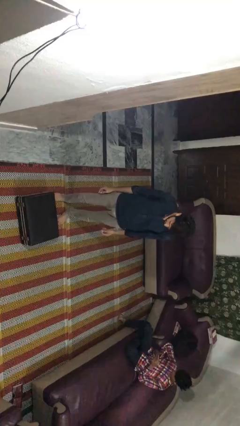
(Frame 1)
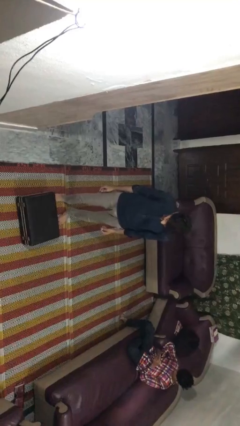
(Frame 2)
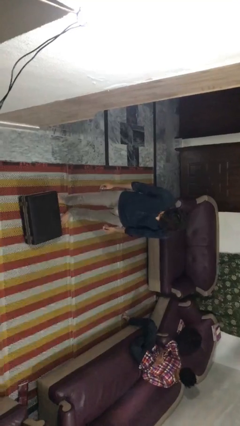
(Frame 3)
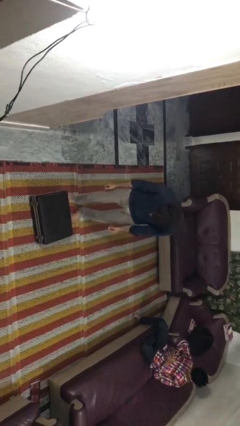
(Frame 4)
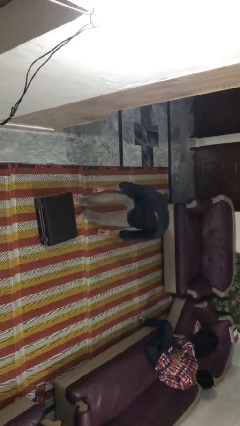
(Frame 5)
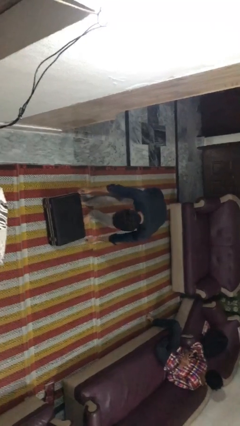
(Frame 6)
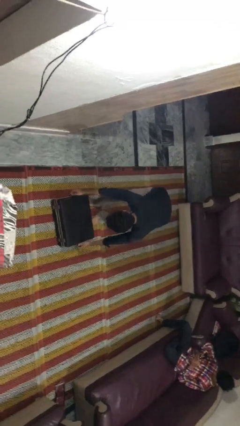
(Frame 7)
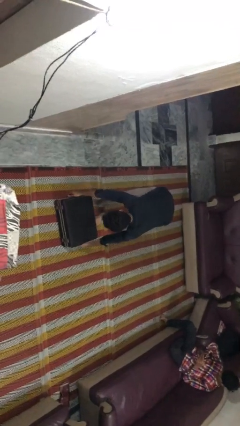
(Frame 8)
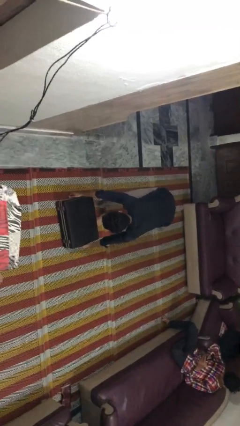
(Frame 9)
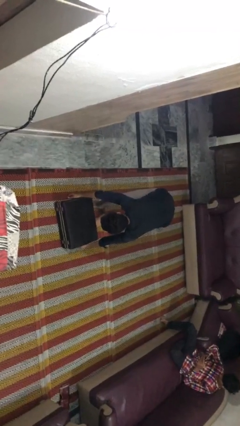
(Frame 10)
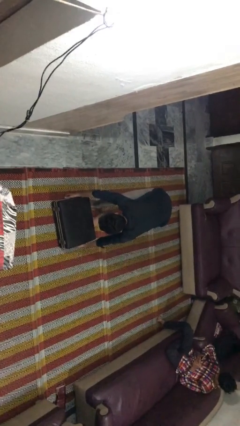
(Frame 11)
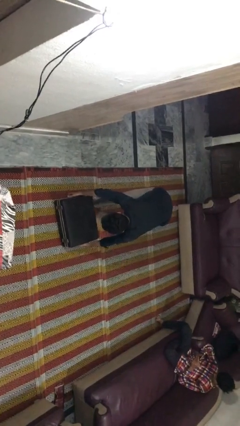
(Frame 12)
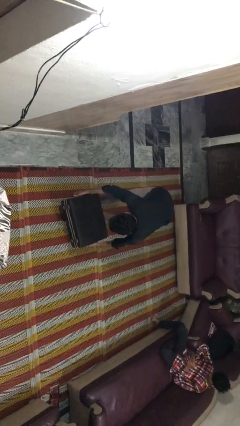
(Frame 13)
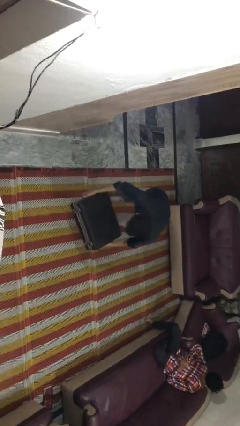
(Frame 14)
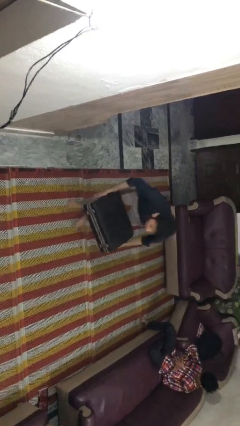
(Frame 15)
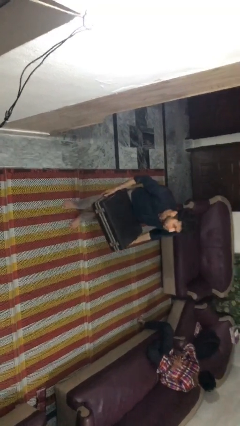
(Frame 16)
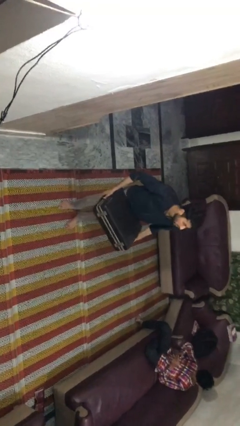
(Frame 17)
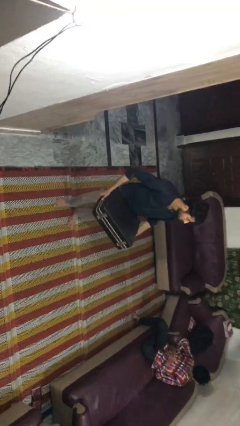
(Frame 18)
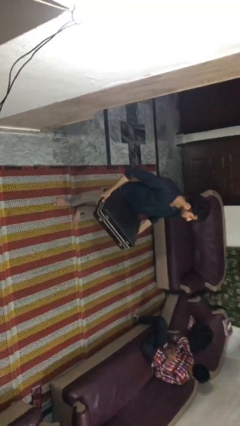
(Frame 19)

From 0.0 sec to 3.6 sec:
person picks up object from floor

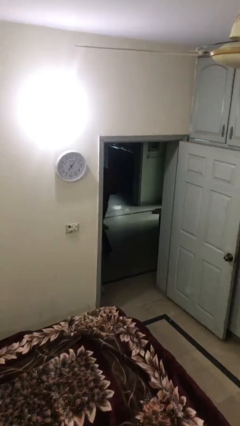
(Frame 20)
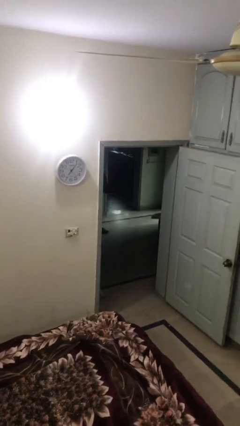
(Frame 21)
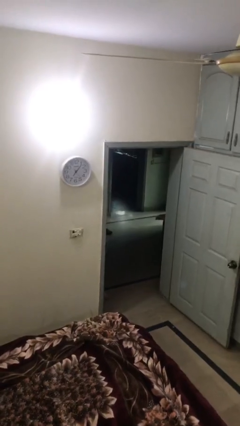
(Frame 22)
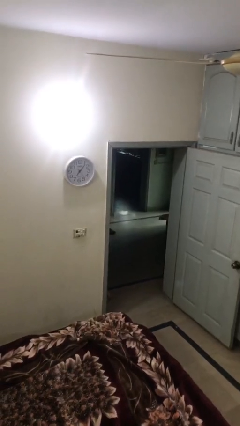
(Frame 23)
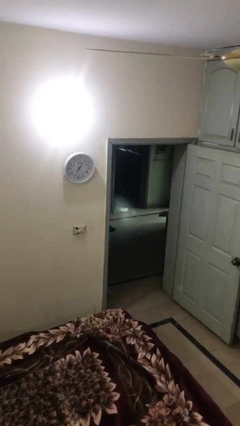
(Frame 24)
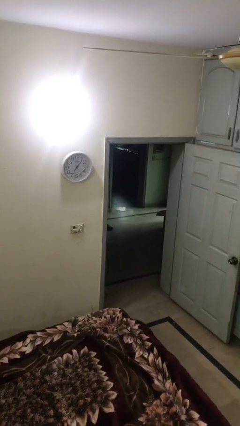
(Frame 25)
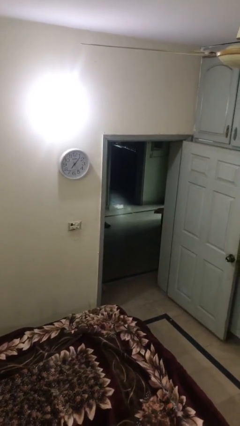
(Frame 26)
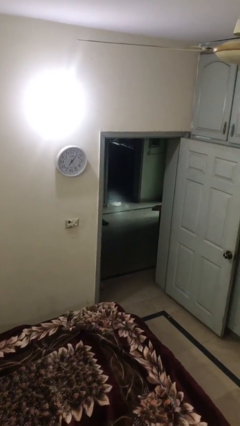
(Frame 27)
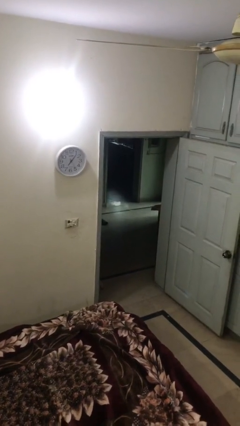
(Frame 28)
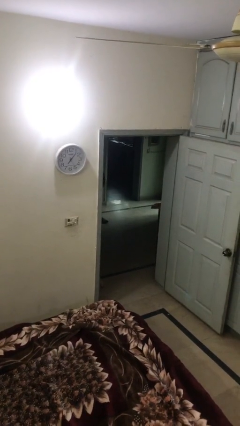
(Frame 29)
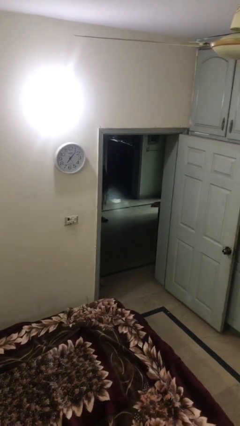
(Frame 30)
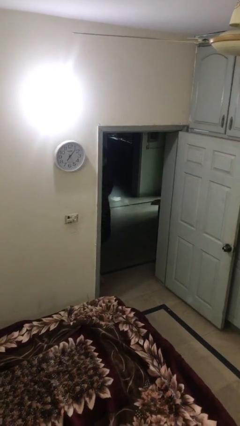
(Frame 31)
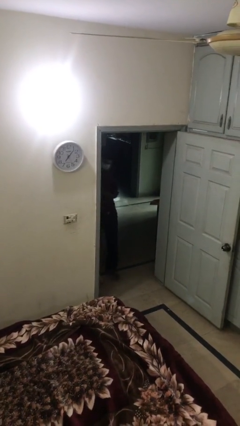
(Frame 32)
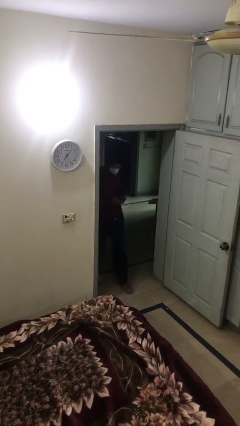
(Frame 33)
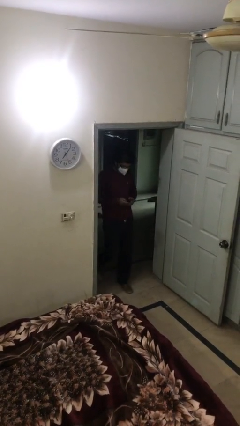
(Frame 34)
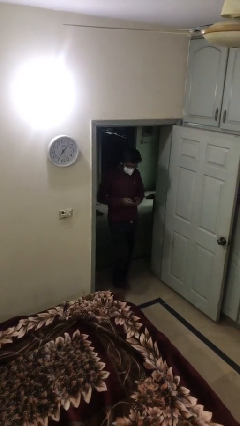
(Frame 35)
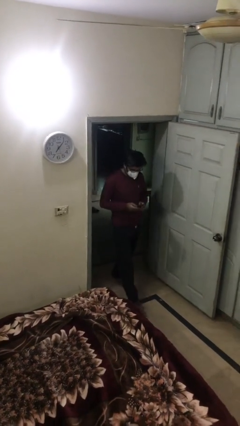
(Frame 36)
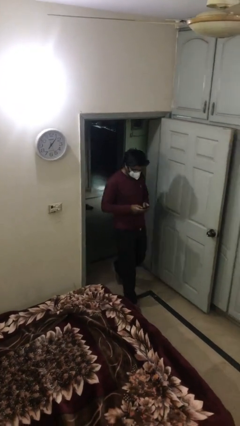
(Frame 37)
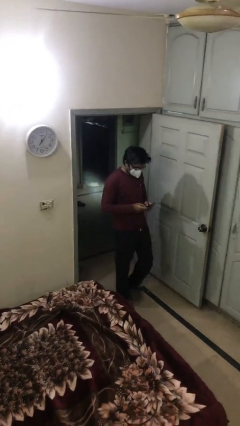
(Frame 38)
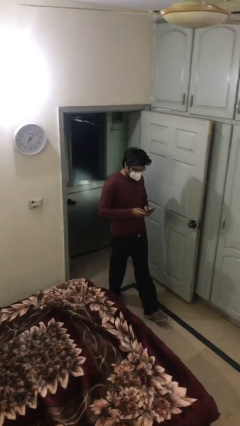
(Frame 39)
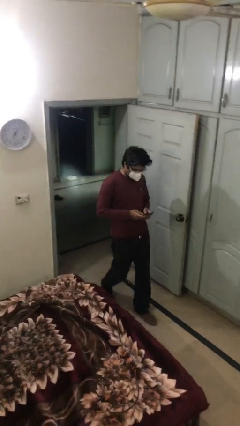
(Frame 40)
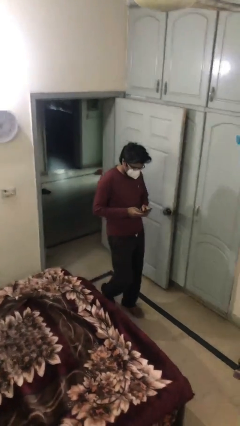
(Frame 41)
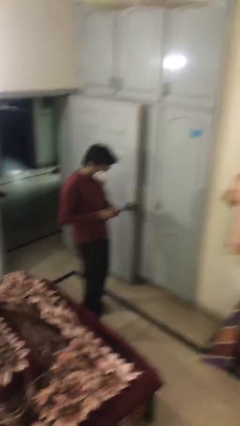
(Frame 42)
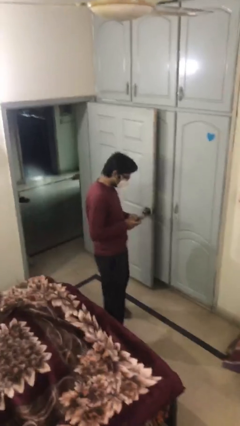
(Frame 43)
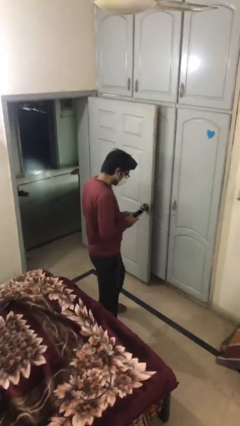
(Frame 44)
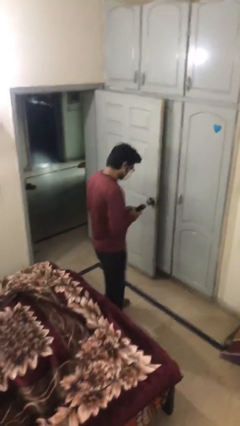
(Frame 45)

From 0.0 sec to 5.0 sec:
person enters scene through structure

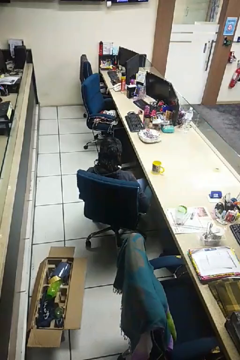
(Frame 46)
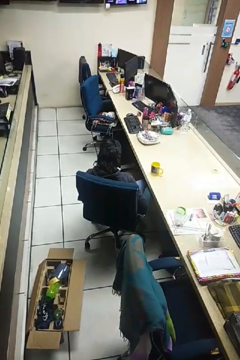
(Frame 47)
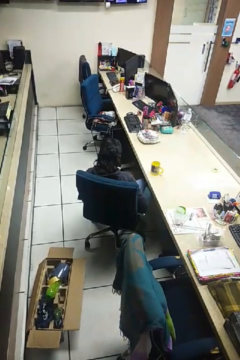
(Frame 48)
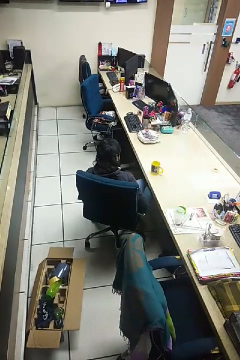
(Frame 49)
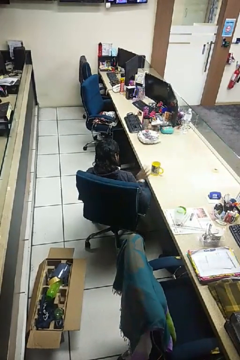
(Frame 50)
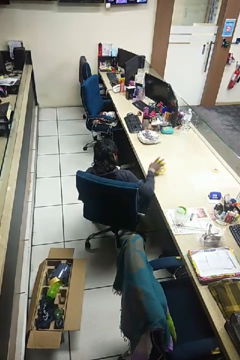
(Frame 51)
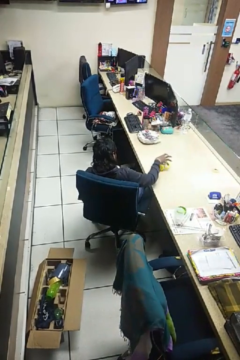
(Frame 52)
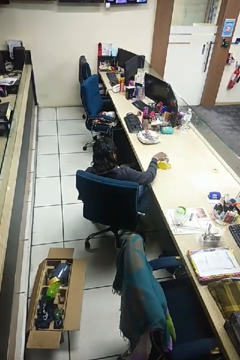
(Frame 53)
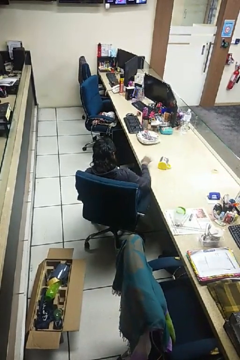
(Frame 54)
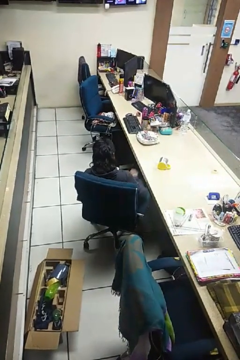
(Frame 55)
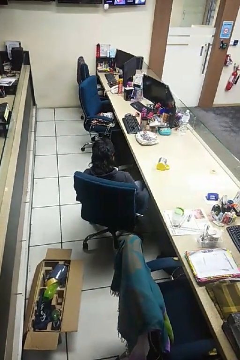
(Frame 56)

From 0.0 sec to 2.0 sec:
person knocks over glass

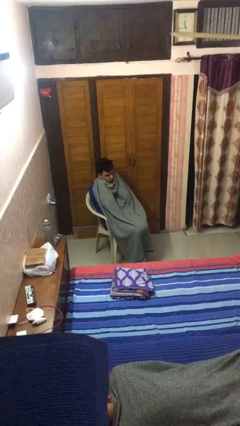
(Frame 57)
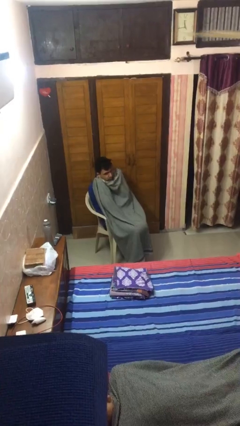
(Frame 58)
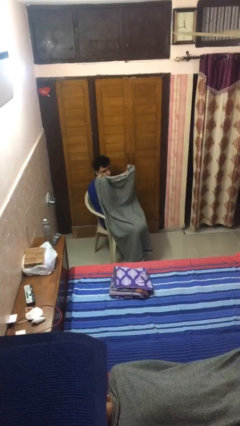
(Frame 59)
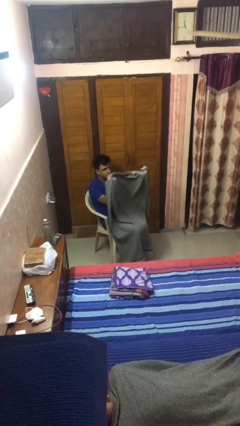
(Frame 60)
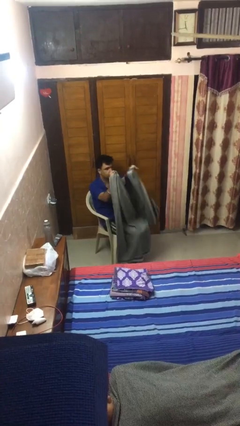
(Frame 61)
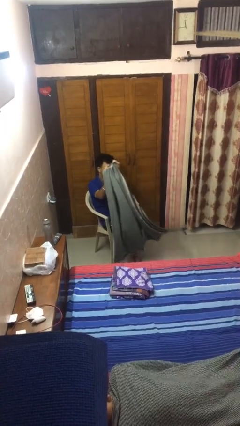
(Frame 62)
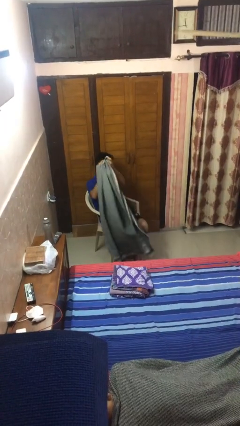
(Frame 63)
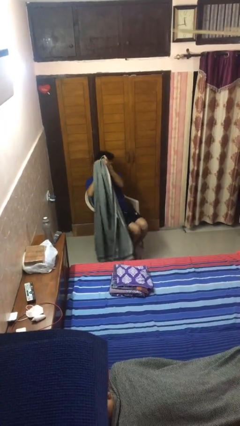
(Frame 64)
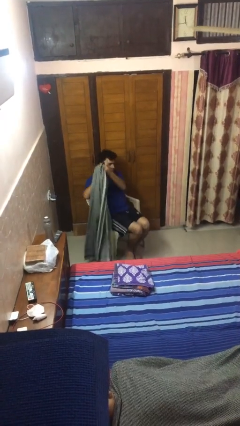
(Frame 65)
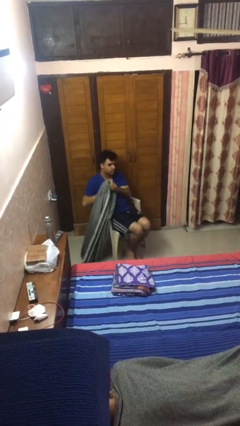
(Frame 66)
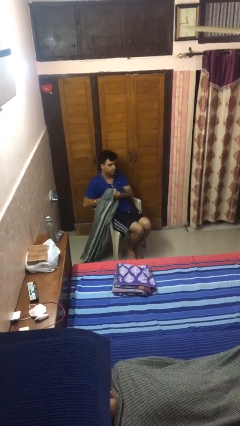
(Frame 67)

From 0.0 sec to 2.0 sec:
person uncovers with blanket

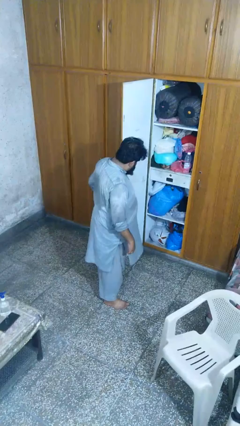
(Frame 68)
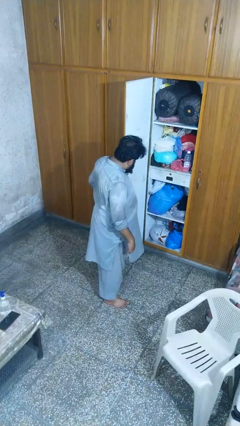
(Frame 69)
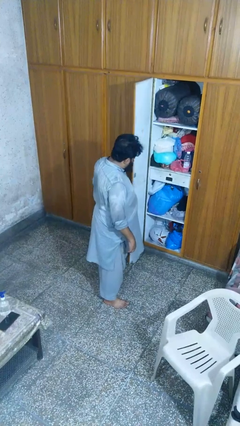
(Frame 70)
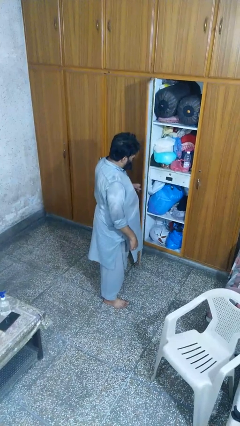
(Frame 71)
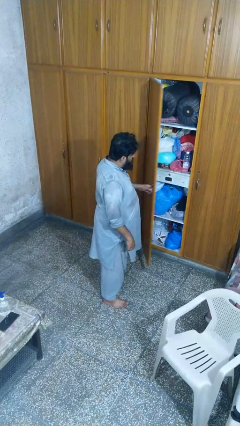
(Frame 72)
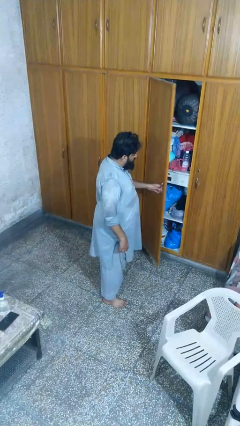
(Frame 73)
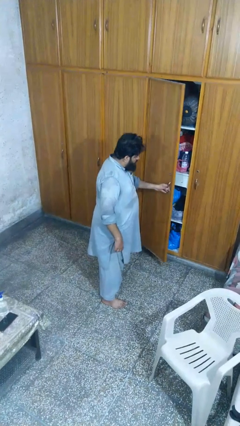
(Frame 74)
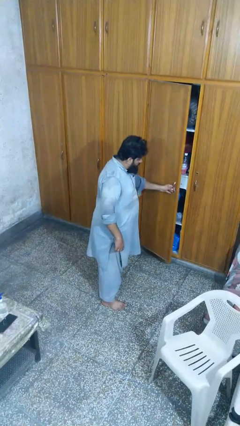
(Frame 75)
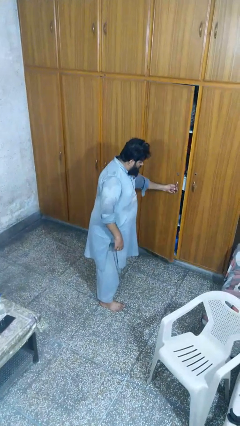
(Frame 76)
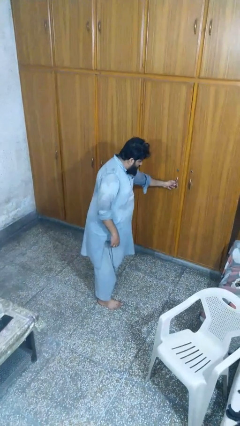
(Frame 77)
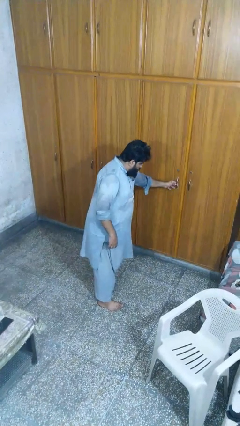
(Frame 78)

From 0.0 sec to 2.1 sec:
person closes closet door

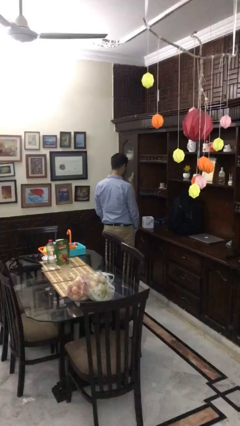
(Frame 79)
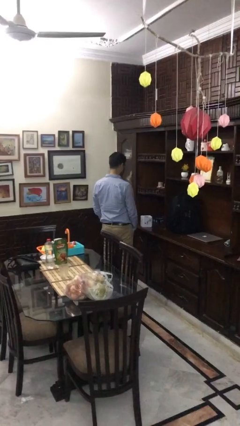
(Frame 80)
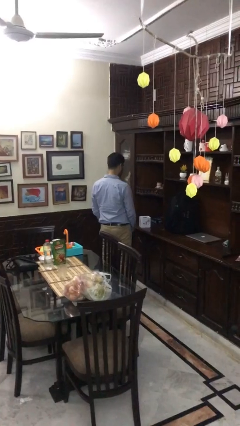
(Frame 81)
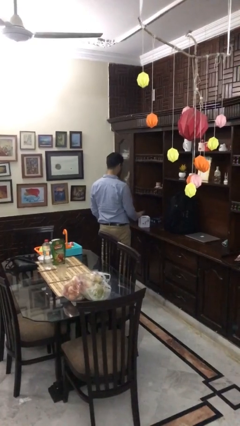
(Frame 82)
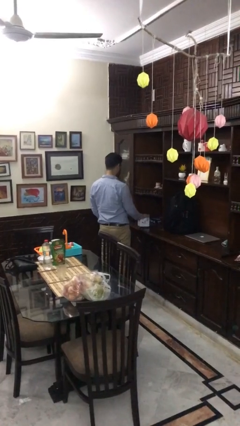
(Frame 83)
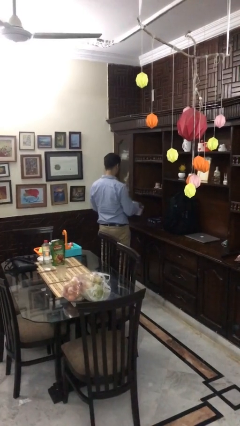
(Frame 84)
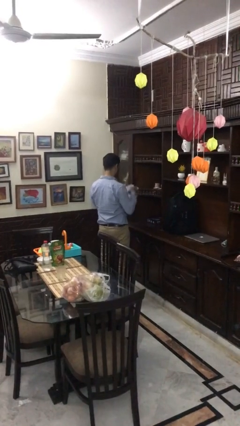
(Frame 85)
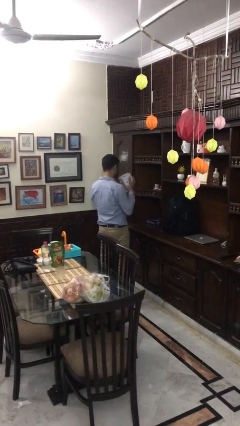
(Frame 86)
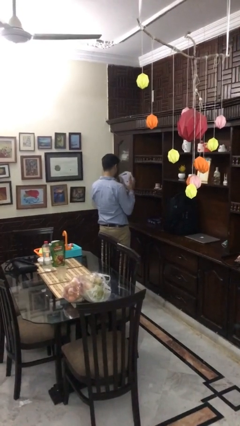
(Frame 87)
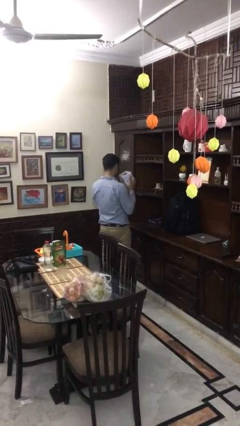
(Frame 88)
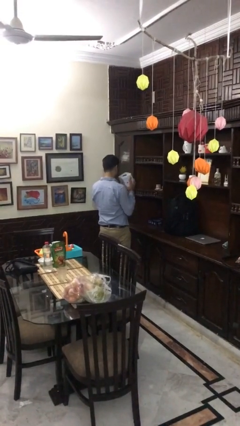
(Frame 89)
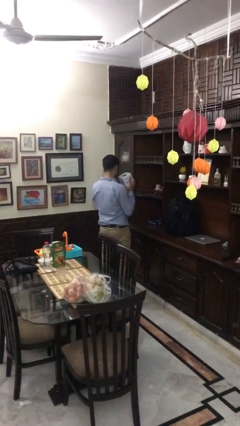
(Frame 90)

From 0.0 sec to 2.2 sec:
person picks up object from countertop

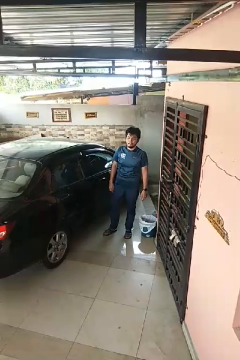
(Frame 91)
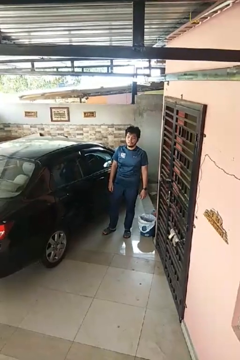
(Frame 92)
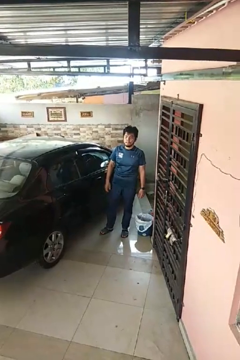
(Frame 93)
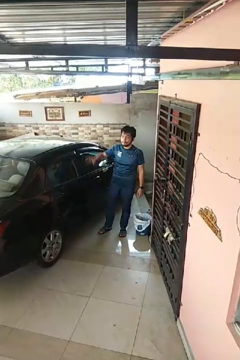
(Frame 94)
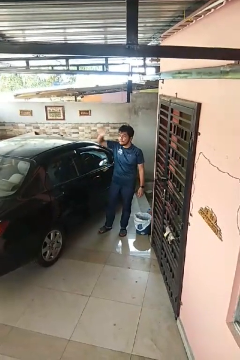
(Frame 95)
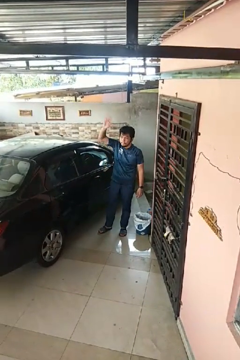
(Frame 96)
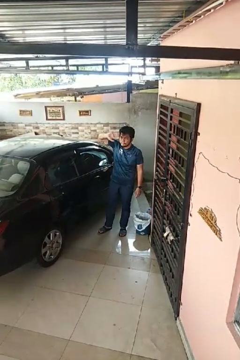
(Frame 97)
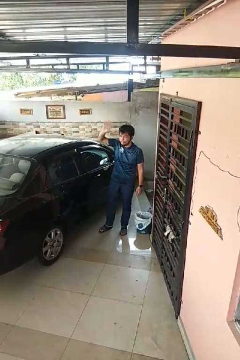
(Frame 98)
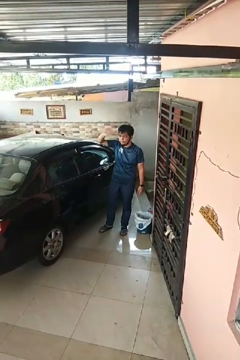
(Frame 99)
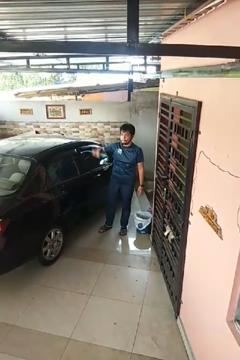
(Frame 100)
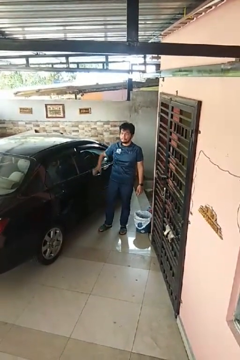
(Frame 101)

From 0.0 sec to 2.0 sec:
person waves at person
